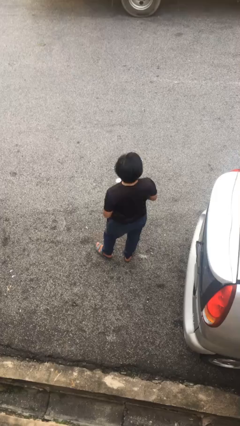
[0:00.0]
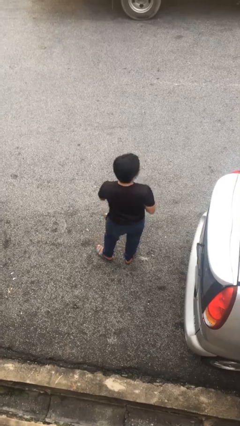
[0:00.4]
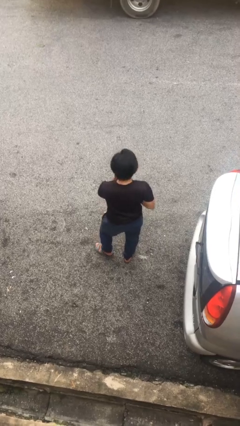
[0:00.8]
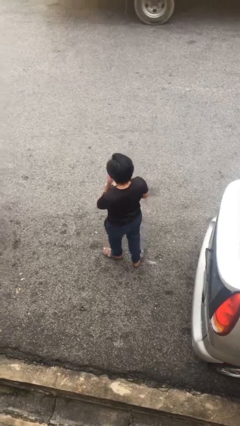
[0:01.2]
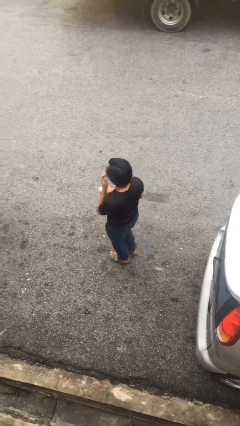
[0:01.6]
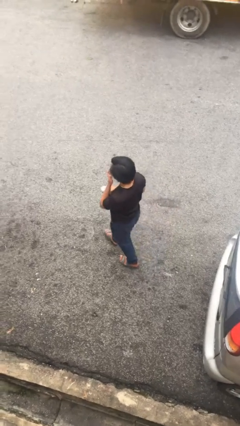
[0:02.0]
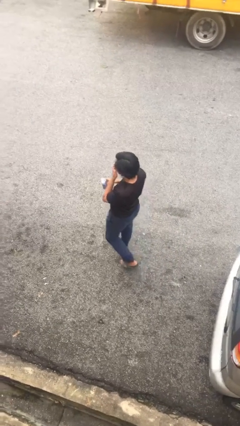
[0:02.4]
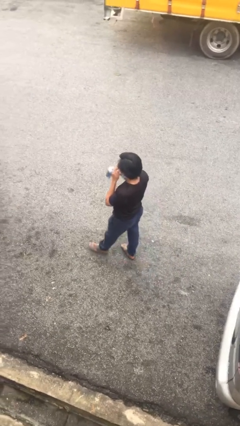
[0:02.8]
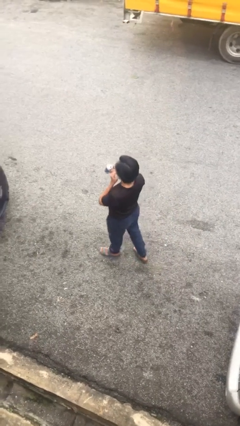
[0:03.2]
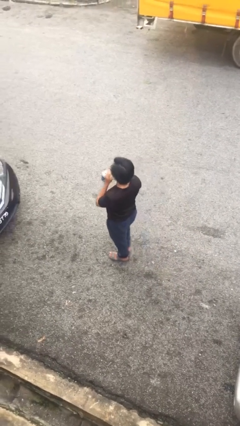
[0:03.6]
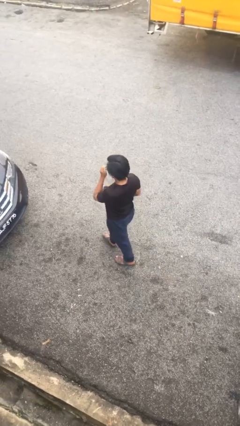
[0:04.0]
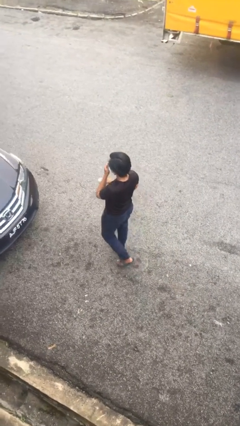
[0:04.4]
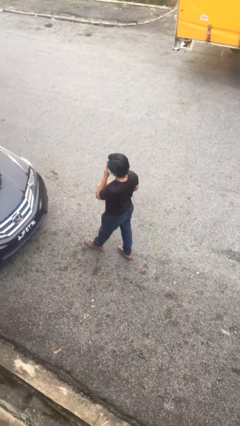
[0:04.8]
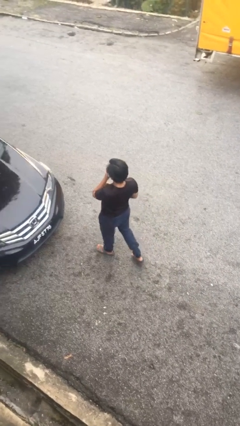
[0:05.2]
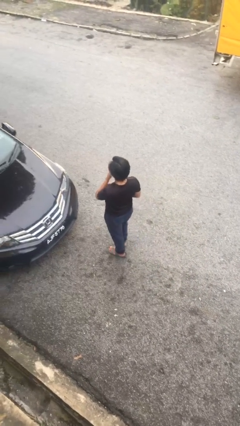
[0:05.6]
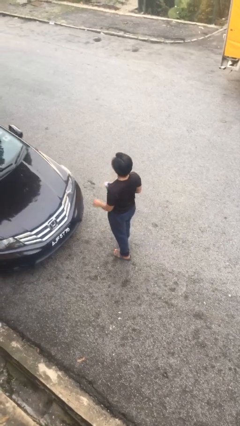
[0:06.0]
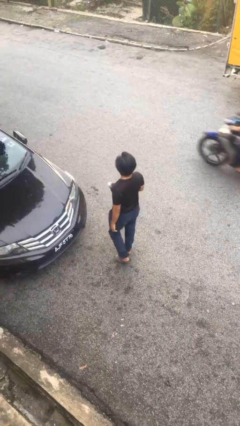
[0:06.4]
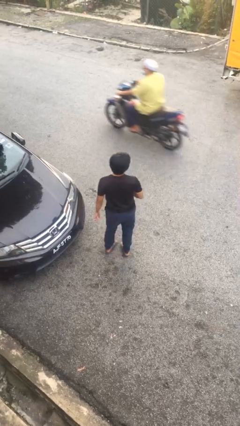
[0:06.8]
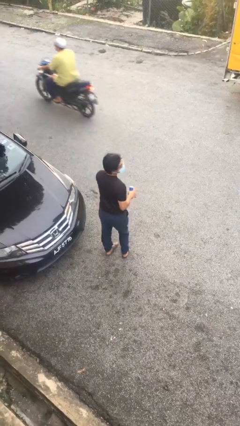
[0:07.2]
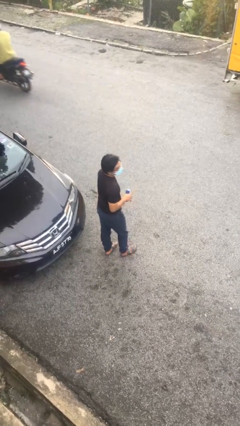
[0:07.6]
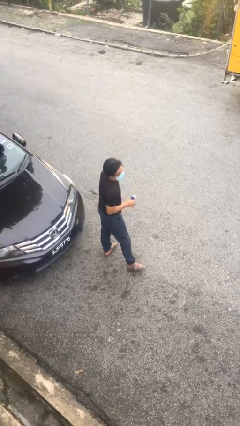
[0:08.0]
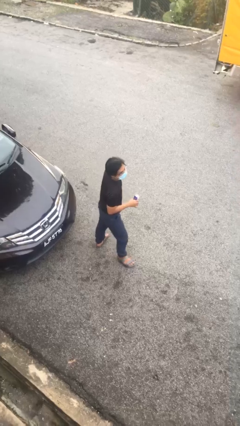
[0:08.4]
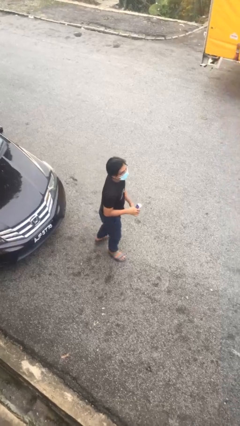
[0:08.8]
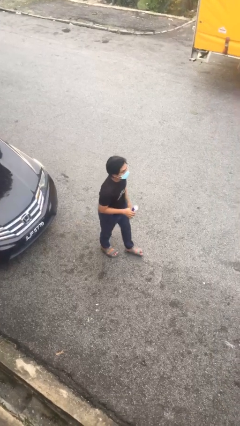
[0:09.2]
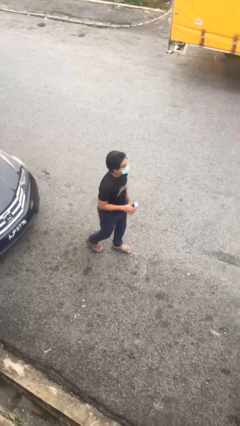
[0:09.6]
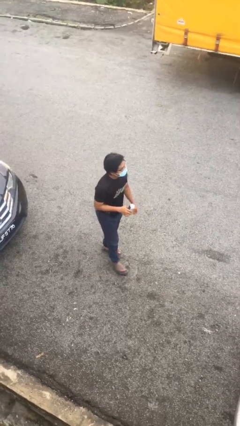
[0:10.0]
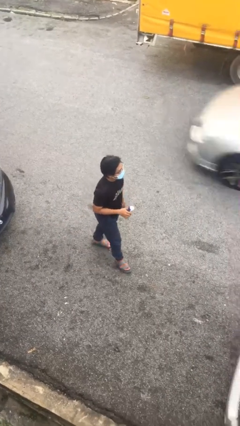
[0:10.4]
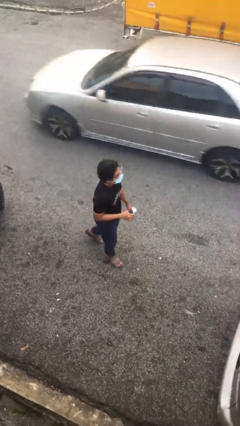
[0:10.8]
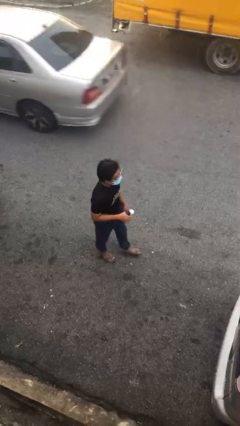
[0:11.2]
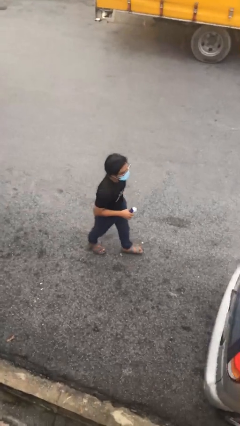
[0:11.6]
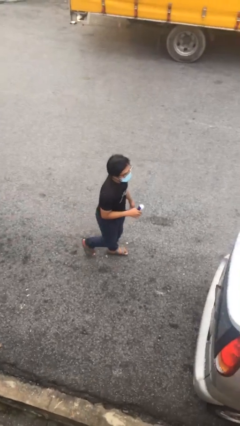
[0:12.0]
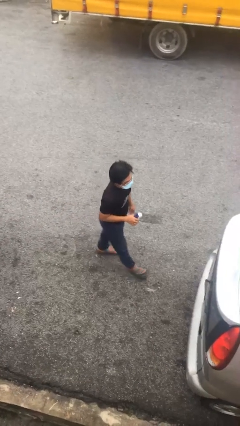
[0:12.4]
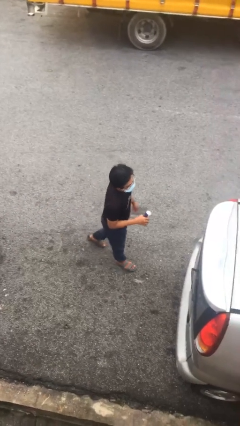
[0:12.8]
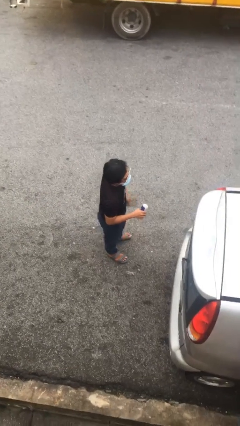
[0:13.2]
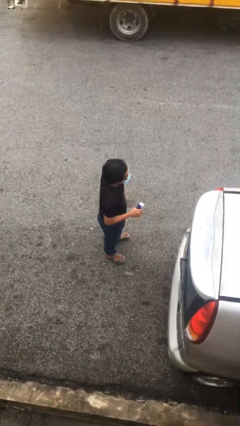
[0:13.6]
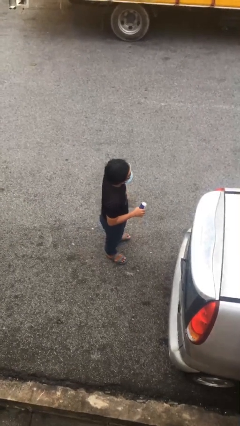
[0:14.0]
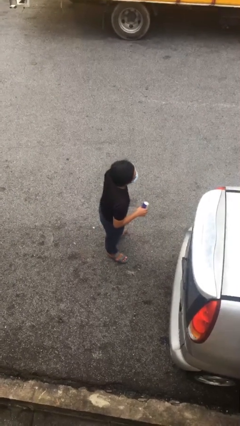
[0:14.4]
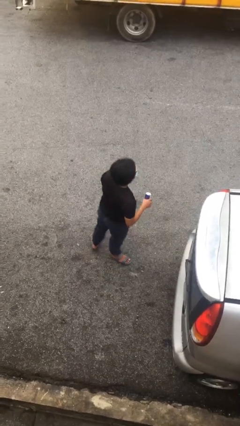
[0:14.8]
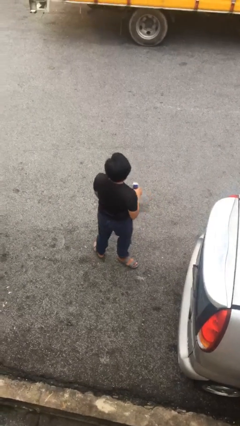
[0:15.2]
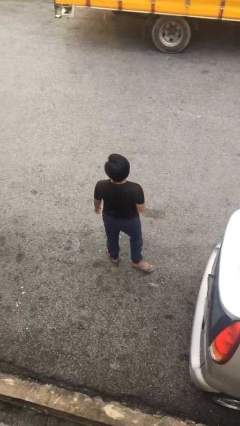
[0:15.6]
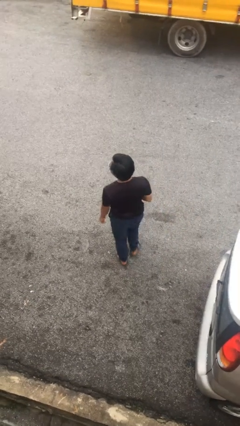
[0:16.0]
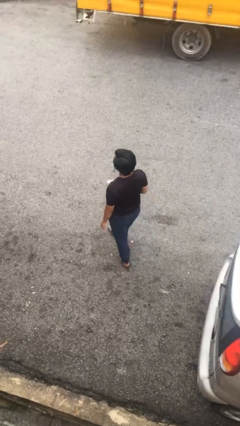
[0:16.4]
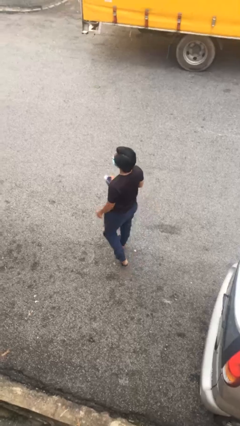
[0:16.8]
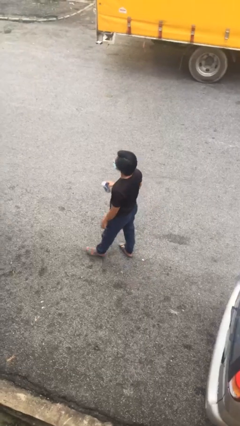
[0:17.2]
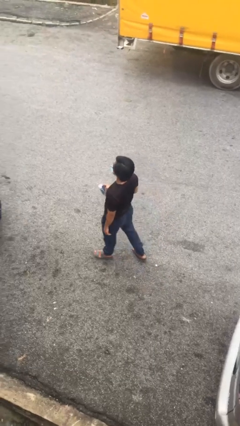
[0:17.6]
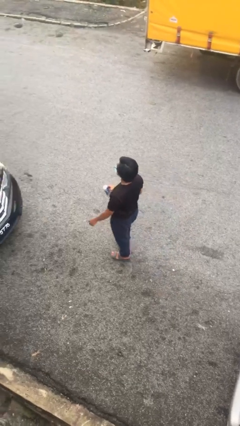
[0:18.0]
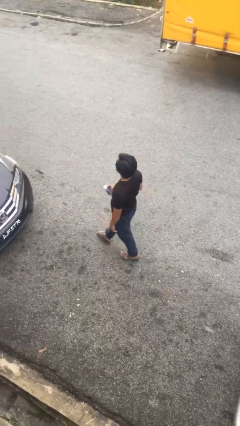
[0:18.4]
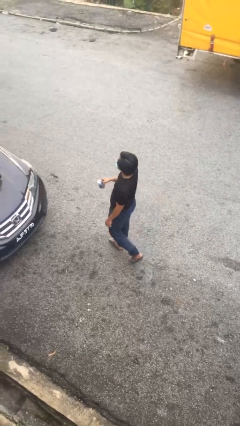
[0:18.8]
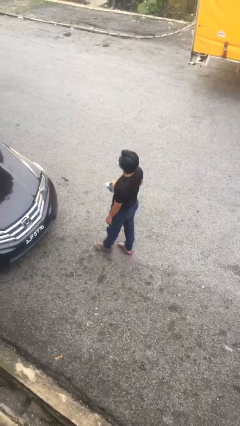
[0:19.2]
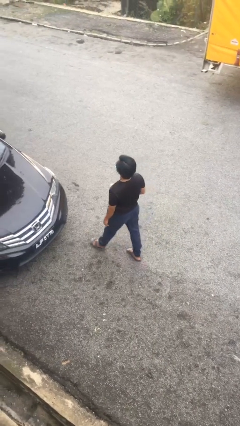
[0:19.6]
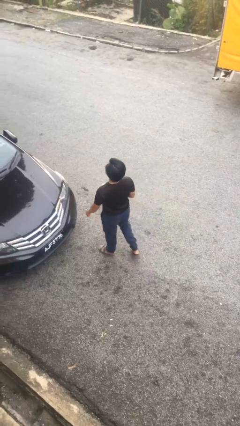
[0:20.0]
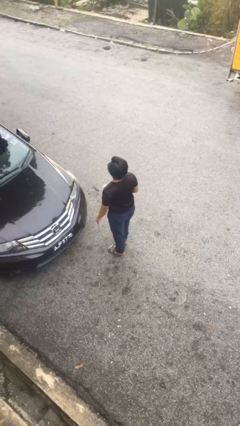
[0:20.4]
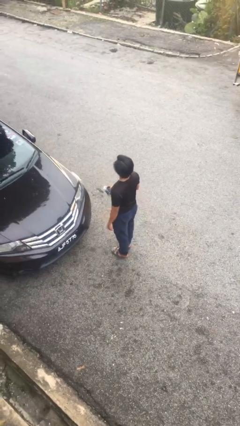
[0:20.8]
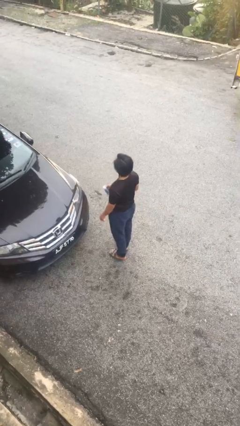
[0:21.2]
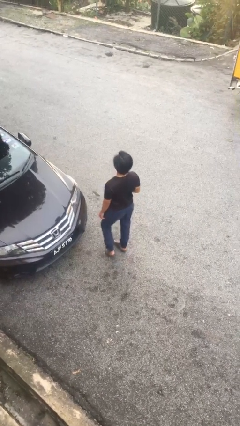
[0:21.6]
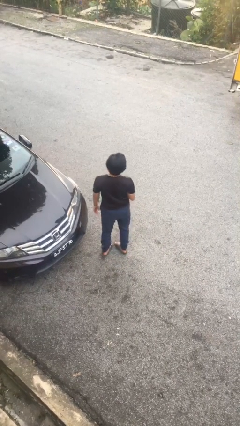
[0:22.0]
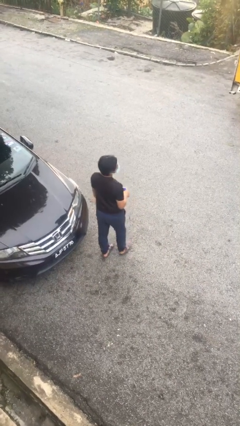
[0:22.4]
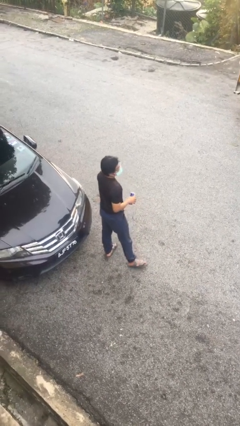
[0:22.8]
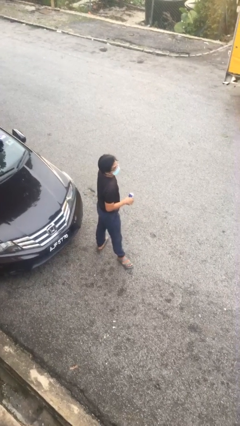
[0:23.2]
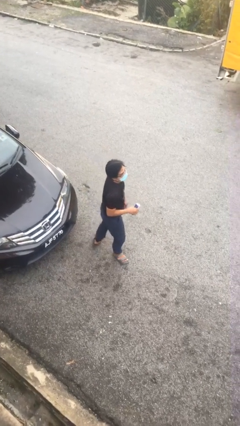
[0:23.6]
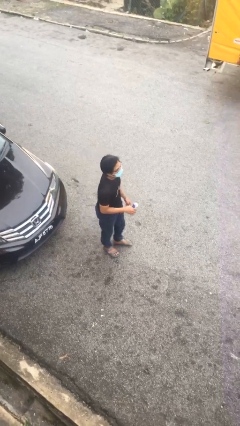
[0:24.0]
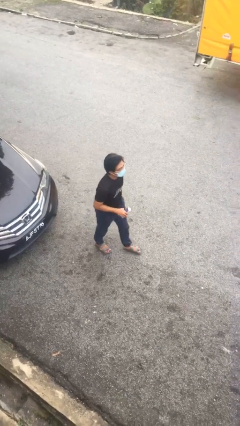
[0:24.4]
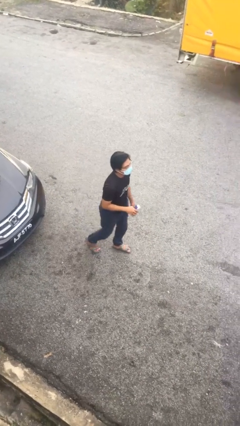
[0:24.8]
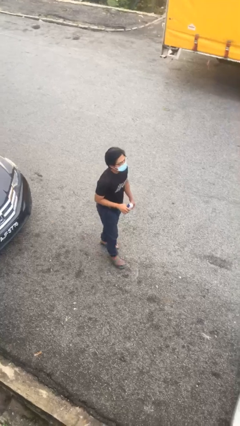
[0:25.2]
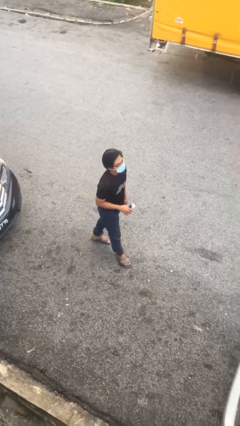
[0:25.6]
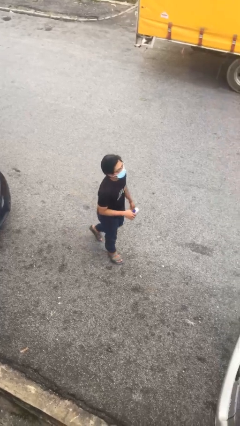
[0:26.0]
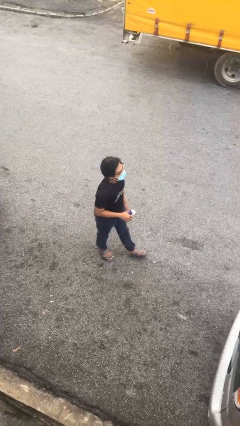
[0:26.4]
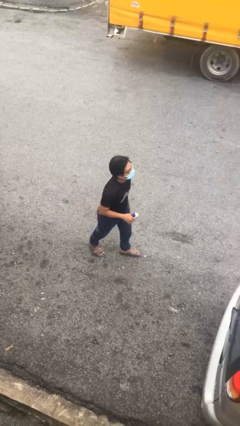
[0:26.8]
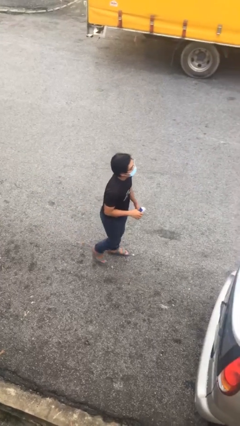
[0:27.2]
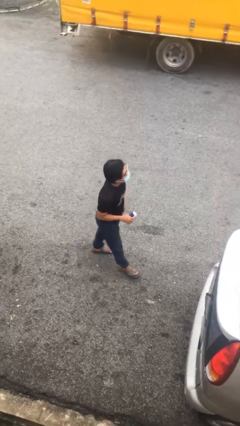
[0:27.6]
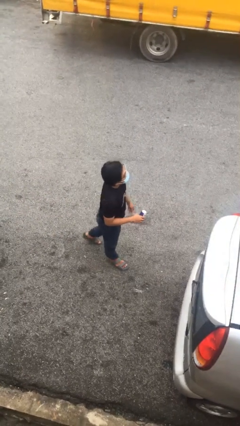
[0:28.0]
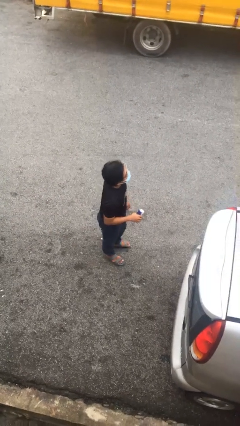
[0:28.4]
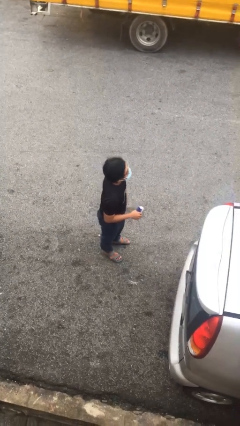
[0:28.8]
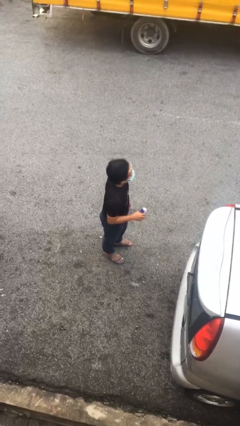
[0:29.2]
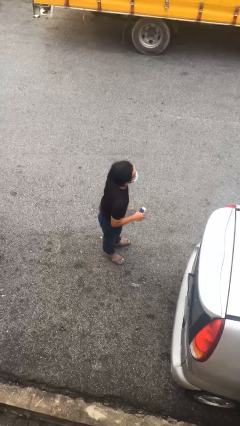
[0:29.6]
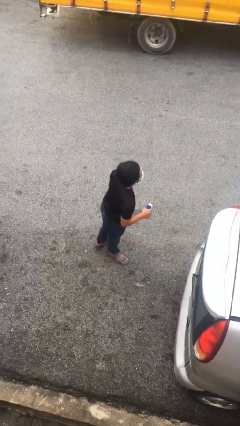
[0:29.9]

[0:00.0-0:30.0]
person walks

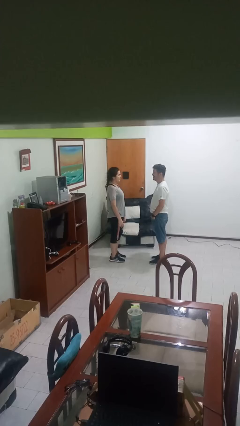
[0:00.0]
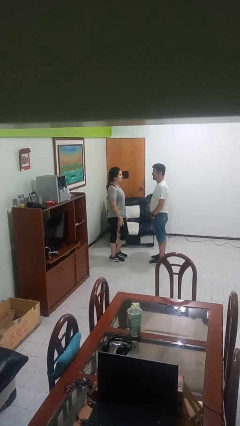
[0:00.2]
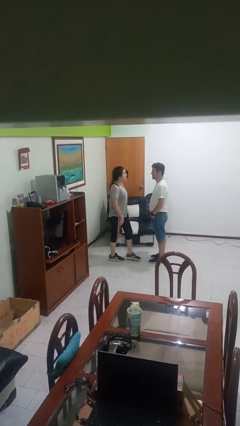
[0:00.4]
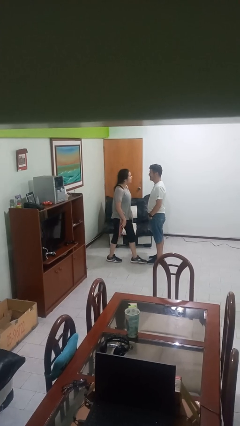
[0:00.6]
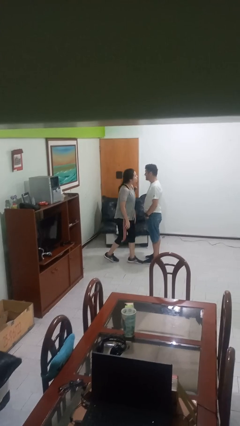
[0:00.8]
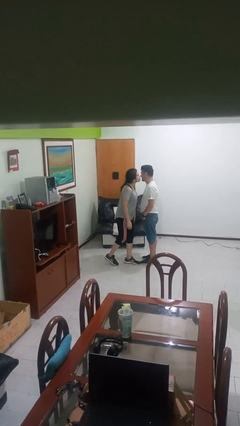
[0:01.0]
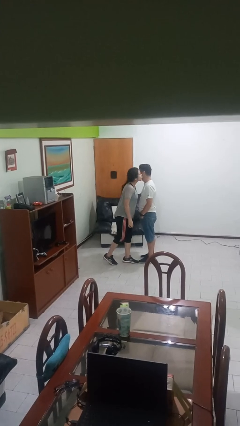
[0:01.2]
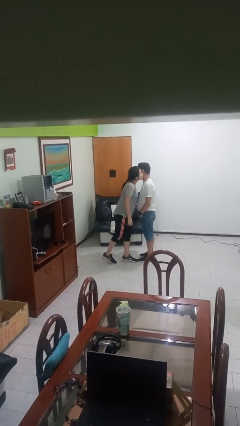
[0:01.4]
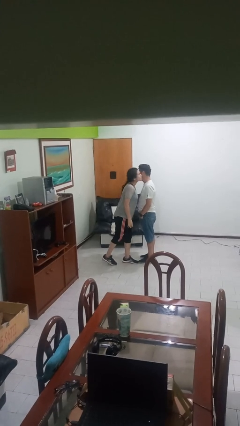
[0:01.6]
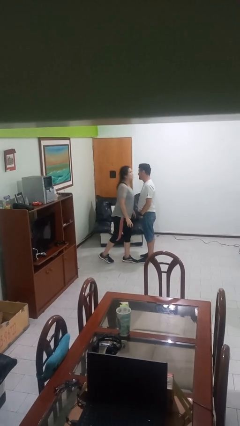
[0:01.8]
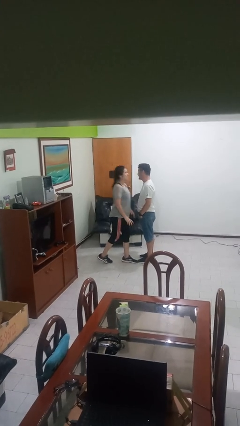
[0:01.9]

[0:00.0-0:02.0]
person kisses cheek of person

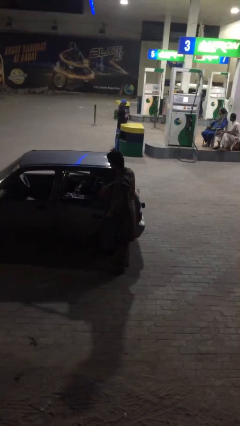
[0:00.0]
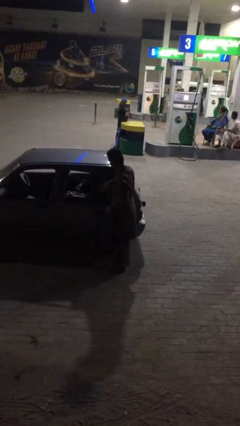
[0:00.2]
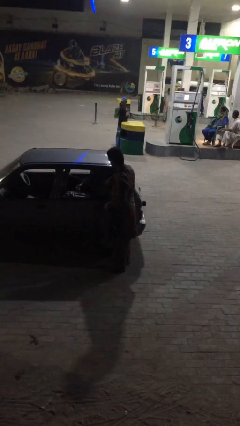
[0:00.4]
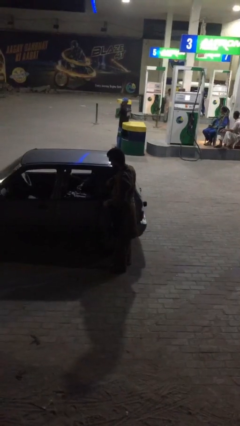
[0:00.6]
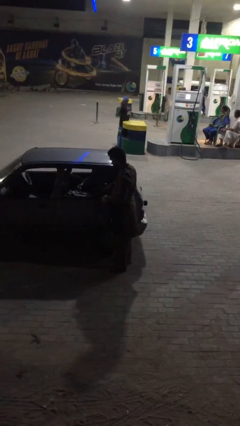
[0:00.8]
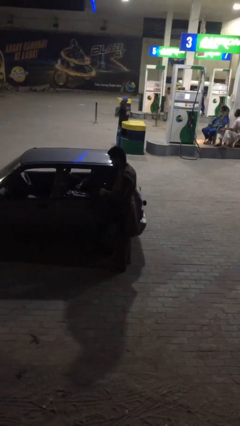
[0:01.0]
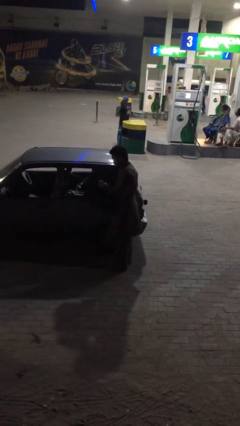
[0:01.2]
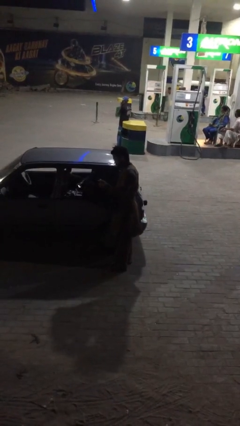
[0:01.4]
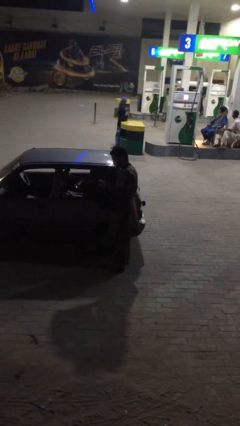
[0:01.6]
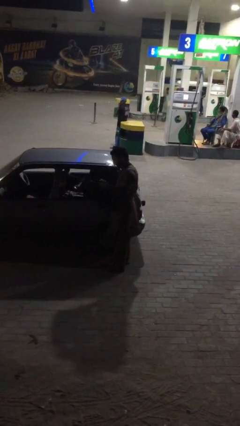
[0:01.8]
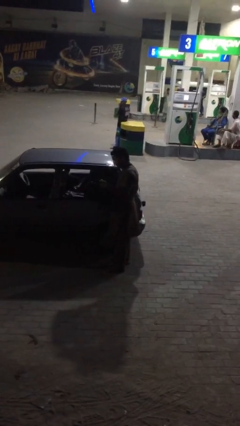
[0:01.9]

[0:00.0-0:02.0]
person closes car door
